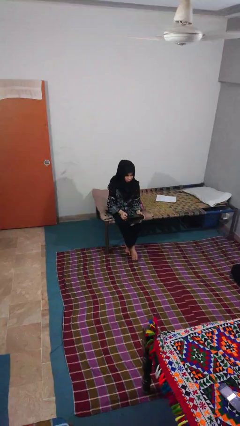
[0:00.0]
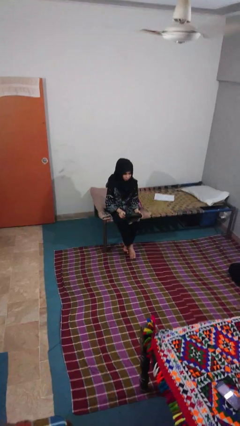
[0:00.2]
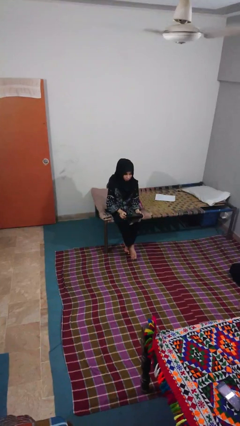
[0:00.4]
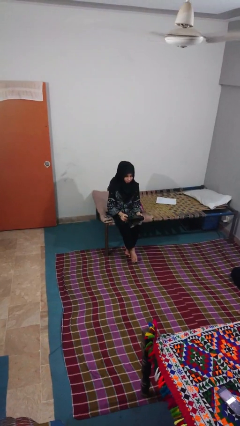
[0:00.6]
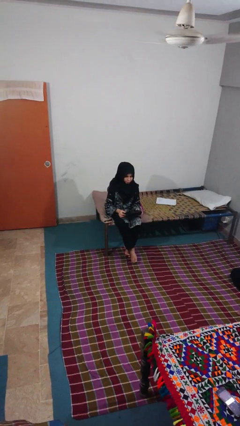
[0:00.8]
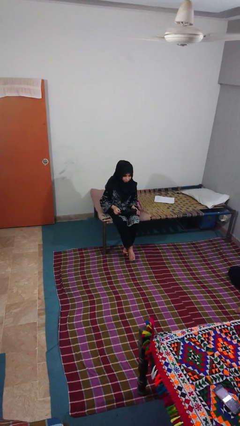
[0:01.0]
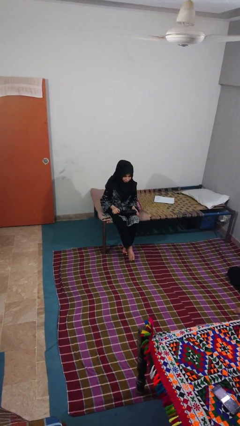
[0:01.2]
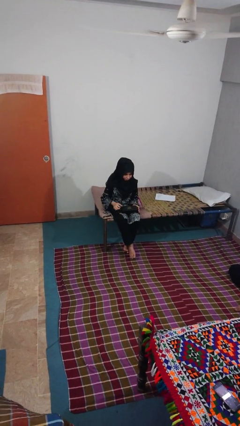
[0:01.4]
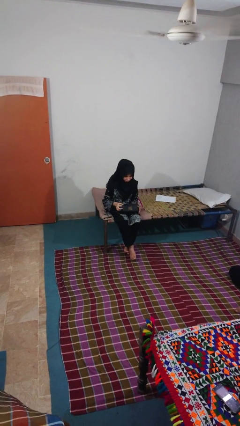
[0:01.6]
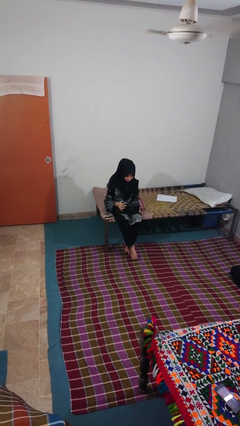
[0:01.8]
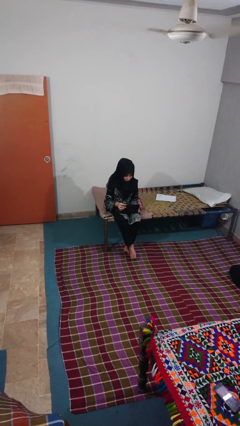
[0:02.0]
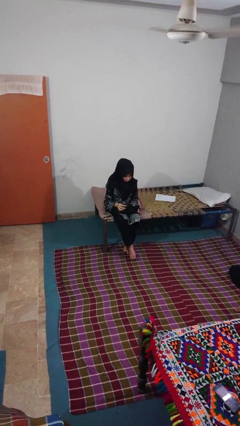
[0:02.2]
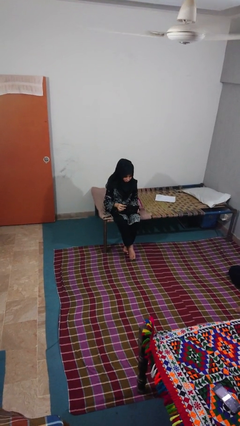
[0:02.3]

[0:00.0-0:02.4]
person opens jewelry box

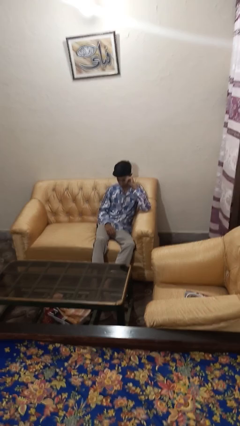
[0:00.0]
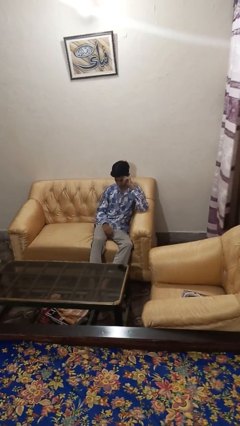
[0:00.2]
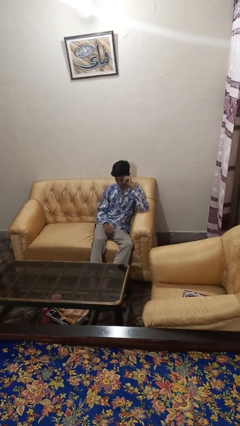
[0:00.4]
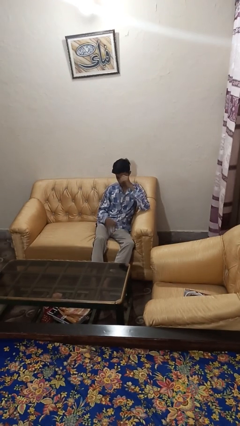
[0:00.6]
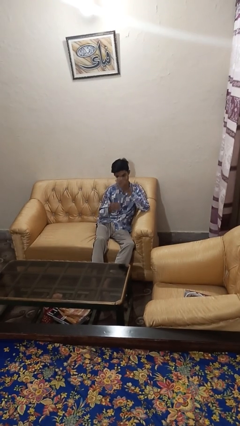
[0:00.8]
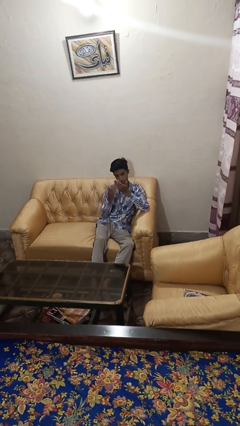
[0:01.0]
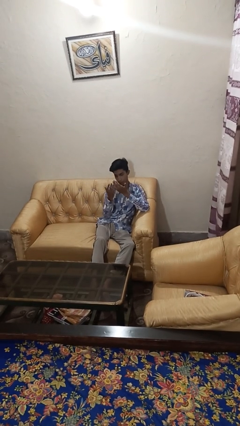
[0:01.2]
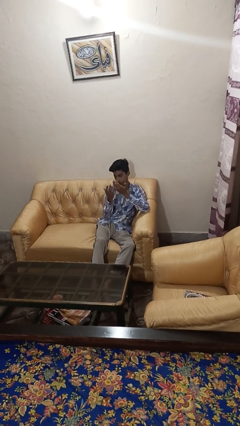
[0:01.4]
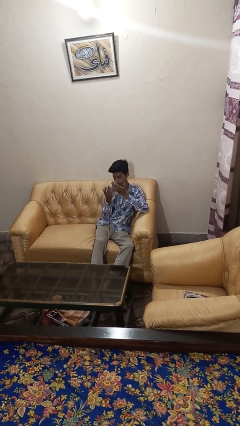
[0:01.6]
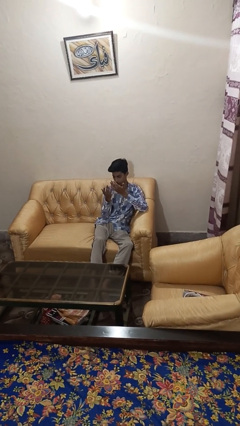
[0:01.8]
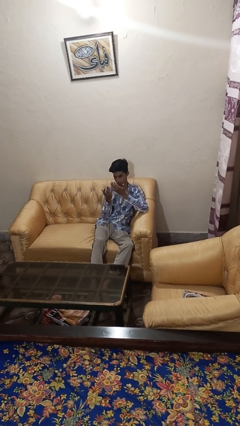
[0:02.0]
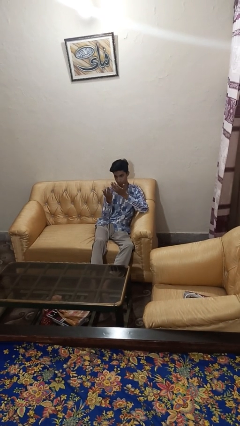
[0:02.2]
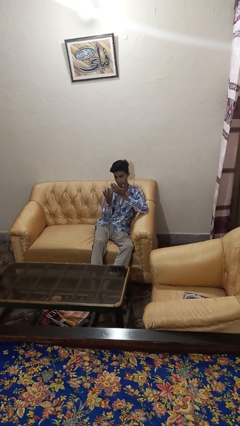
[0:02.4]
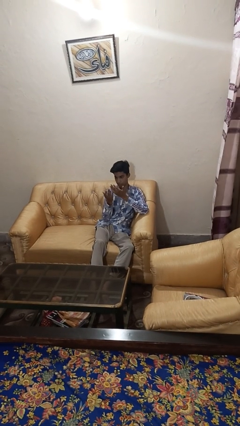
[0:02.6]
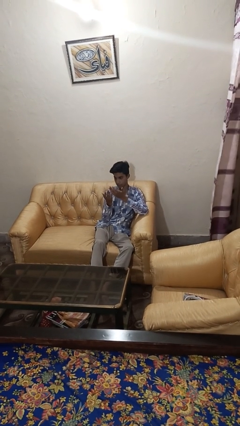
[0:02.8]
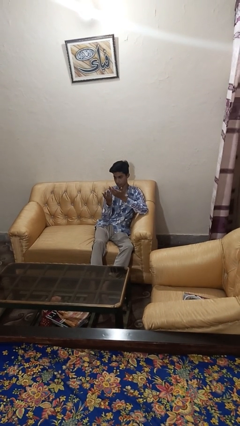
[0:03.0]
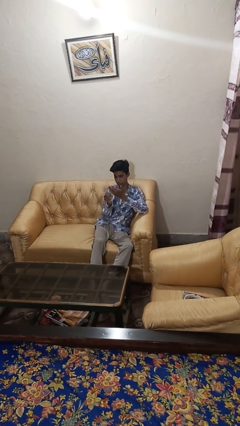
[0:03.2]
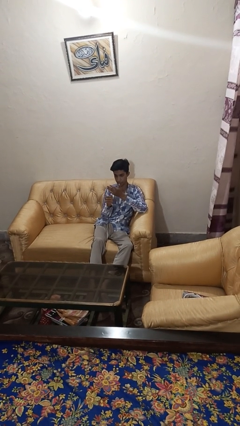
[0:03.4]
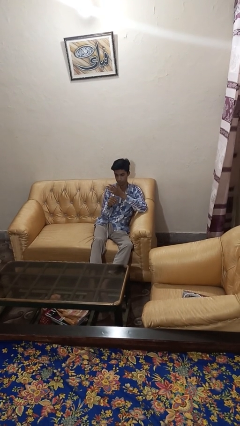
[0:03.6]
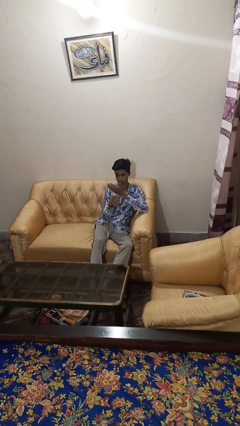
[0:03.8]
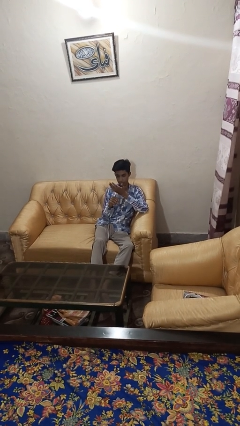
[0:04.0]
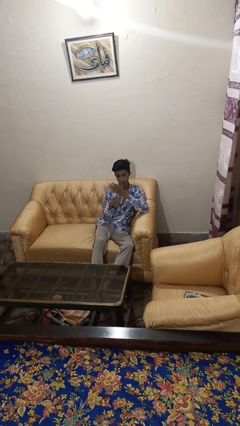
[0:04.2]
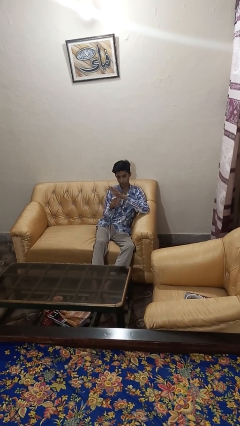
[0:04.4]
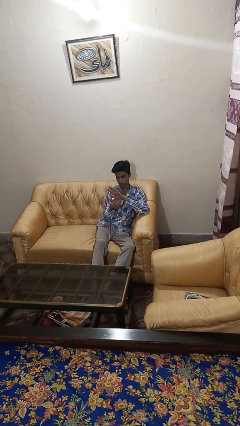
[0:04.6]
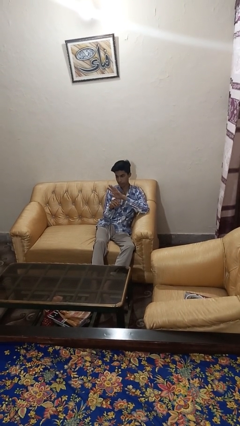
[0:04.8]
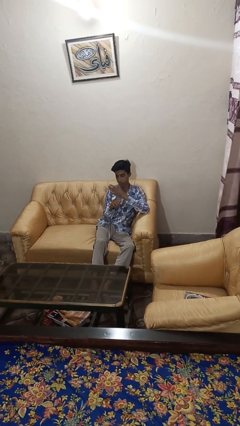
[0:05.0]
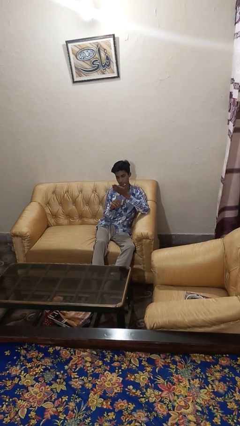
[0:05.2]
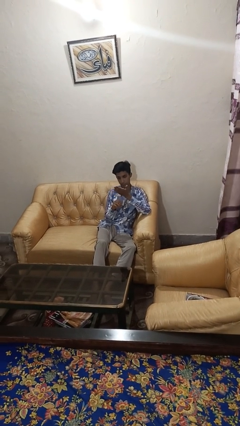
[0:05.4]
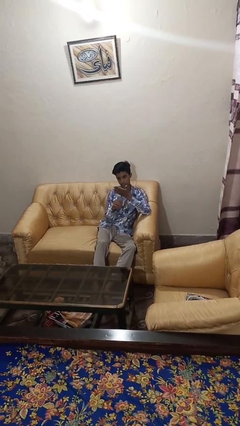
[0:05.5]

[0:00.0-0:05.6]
person looks at hands in lap

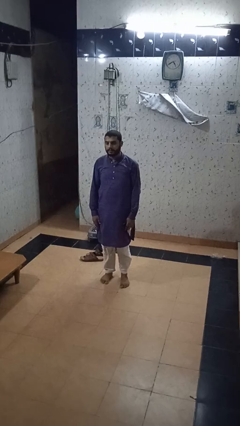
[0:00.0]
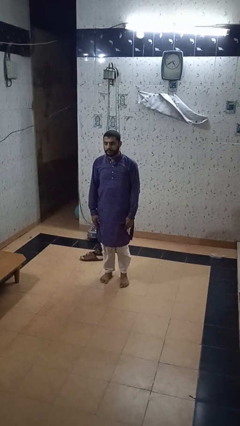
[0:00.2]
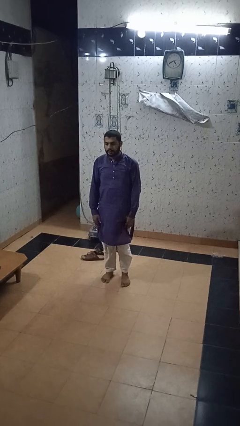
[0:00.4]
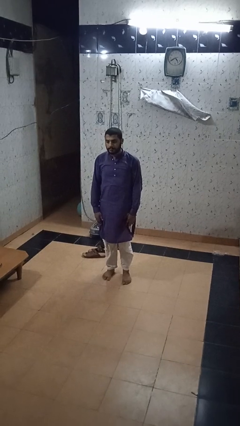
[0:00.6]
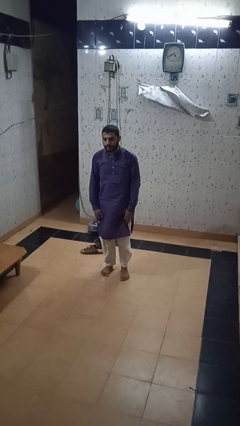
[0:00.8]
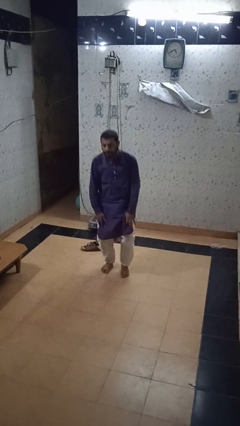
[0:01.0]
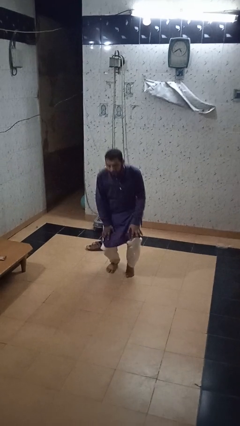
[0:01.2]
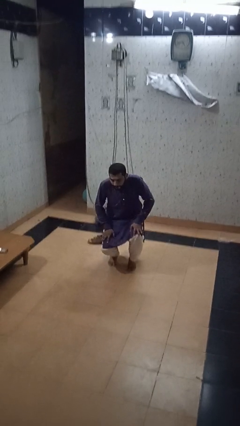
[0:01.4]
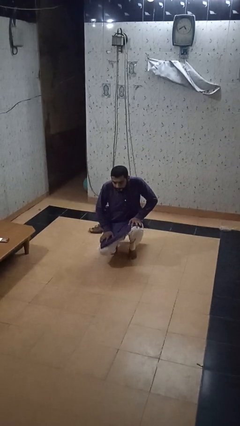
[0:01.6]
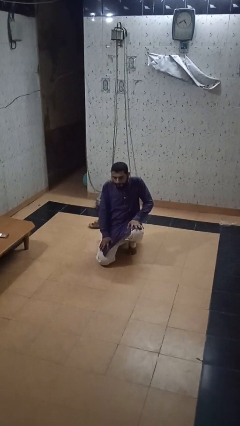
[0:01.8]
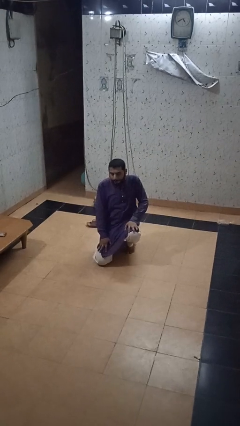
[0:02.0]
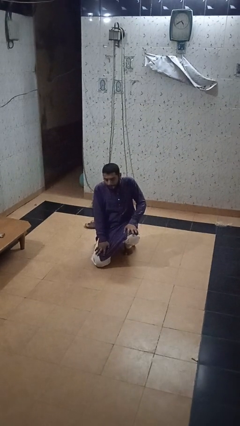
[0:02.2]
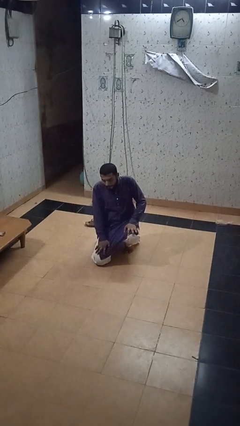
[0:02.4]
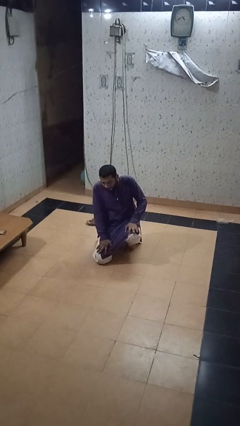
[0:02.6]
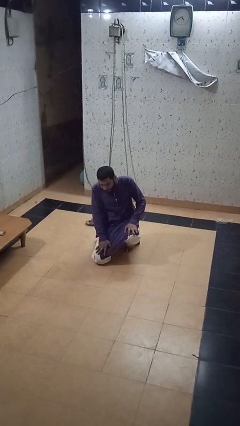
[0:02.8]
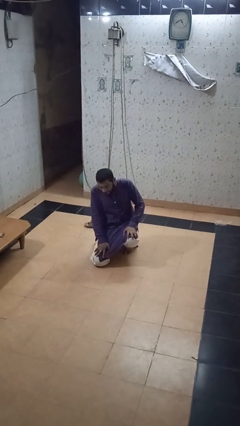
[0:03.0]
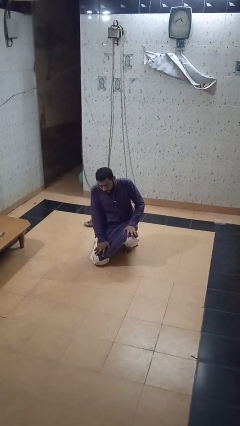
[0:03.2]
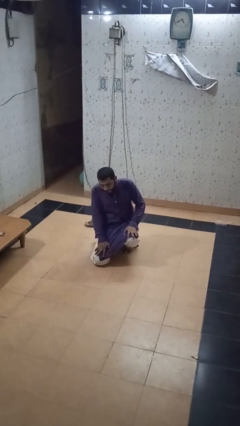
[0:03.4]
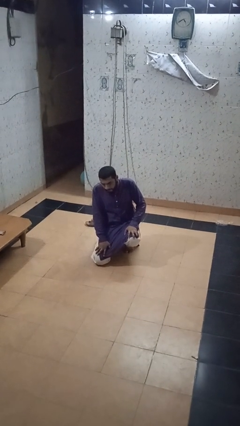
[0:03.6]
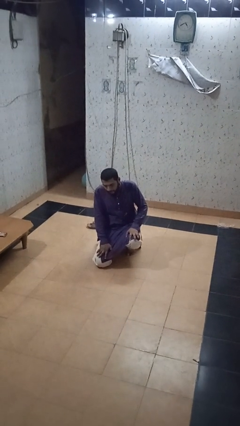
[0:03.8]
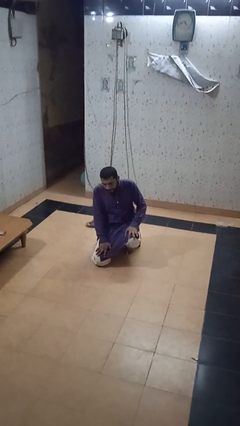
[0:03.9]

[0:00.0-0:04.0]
person kneels

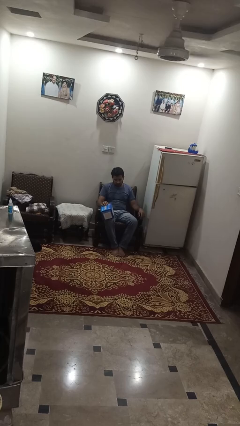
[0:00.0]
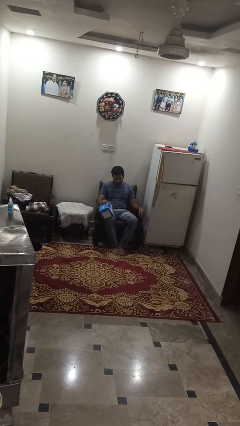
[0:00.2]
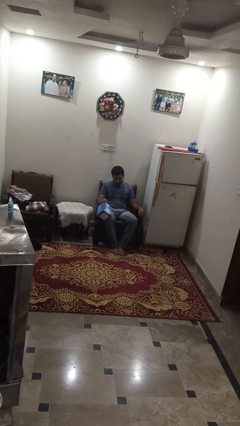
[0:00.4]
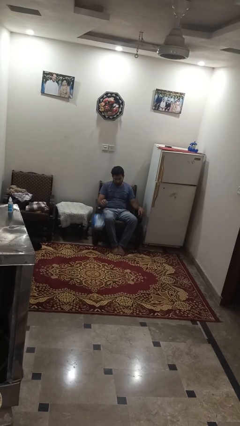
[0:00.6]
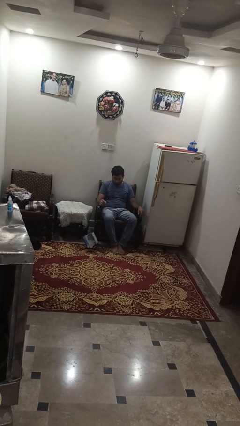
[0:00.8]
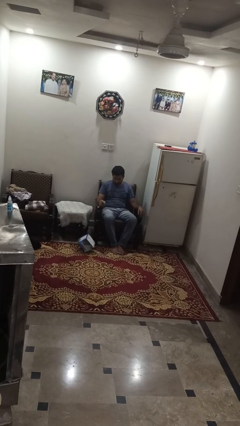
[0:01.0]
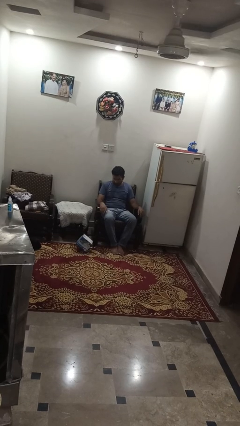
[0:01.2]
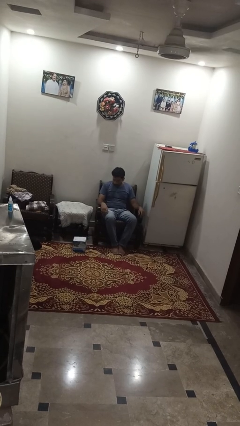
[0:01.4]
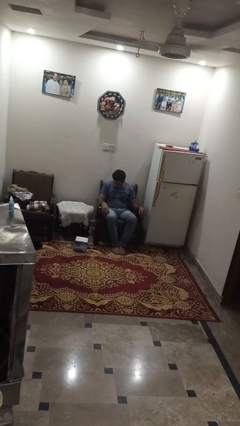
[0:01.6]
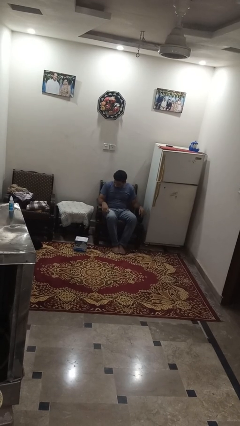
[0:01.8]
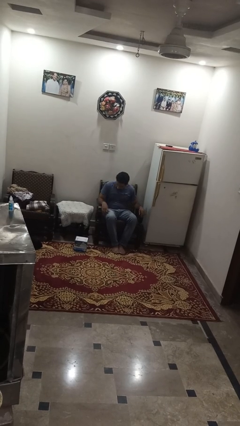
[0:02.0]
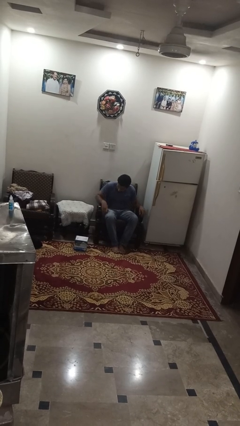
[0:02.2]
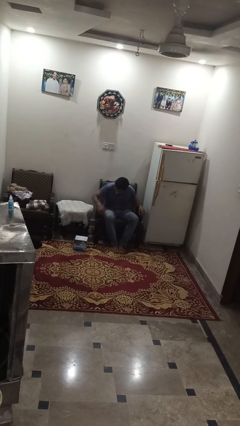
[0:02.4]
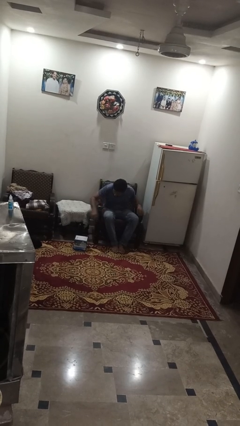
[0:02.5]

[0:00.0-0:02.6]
person drops object

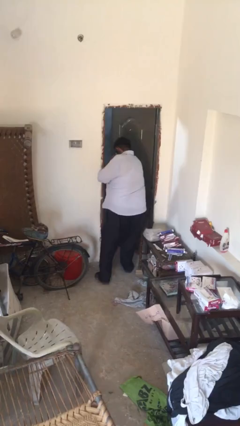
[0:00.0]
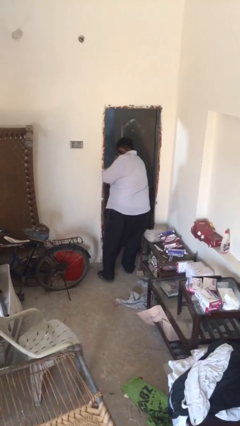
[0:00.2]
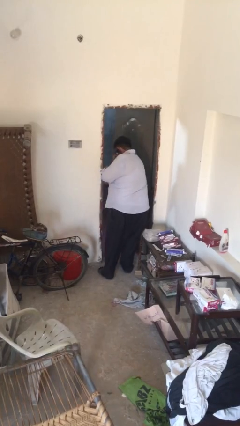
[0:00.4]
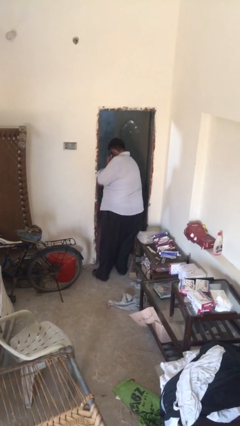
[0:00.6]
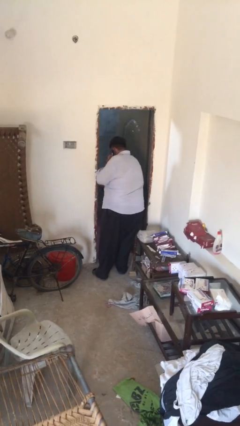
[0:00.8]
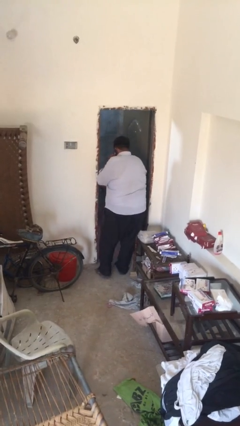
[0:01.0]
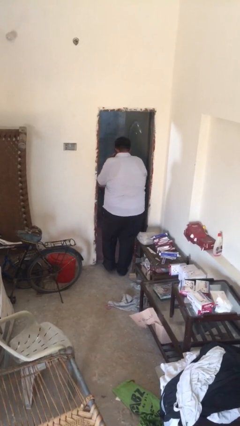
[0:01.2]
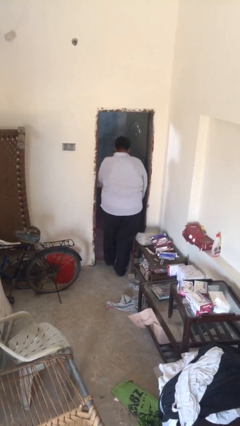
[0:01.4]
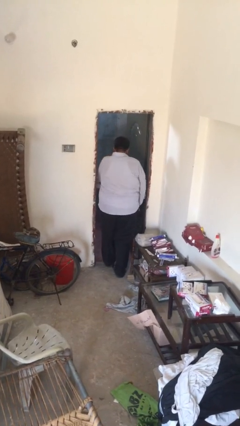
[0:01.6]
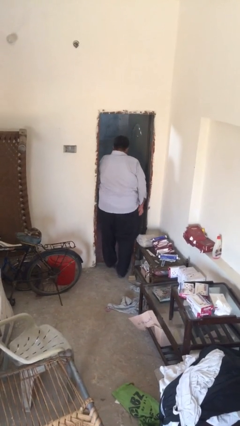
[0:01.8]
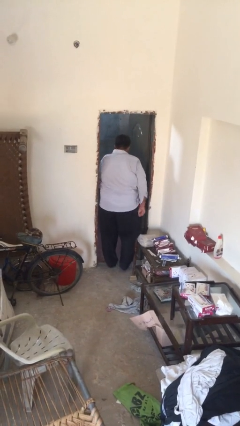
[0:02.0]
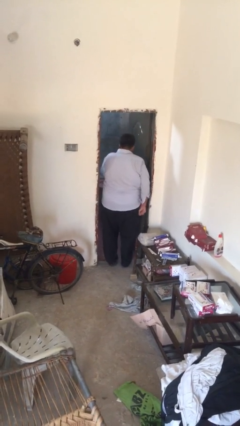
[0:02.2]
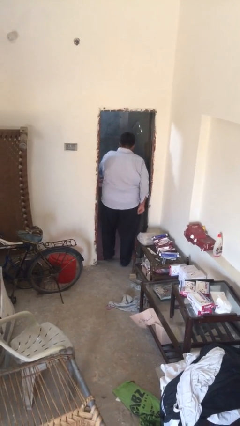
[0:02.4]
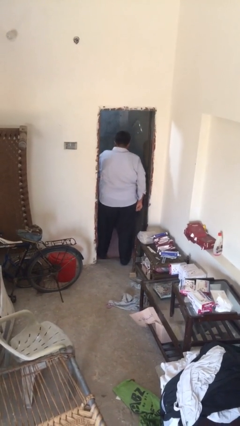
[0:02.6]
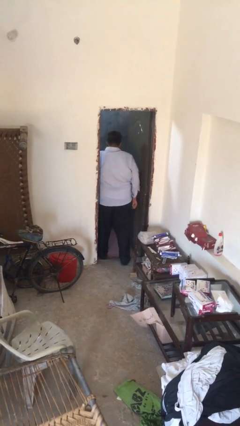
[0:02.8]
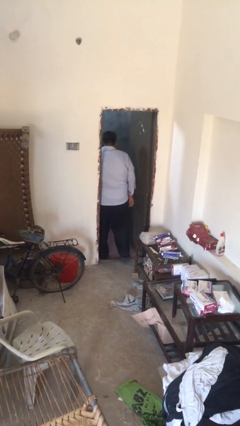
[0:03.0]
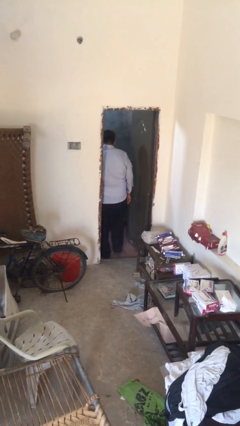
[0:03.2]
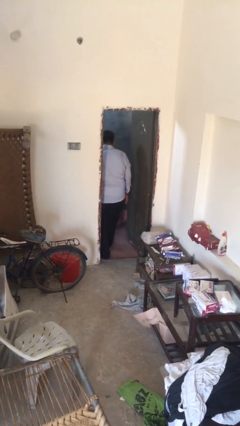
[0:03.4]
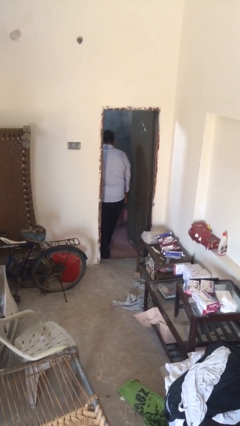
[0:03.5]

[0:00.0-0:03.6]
person exits scene through structure
